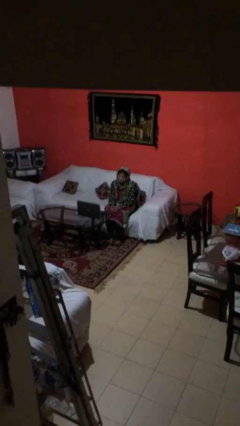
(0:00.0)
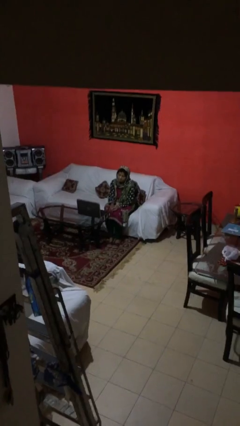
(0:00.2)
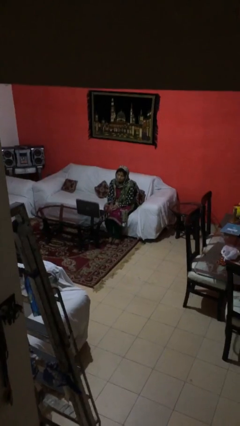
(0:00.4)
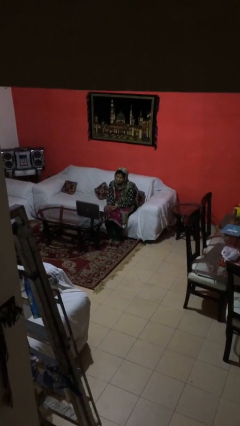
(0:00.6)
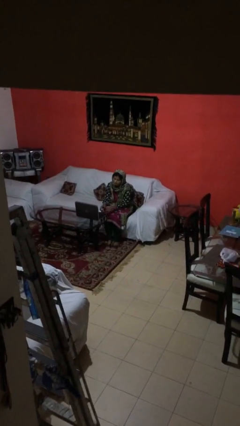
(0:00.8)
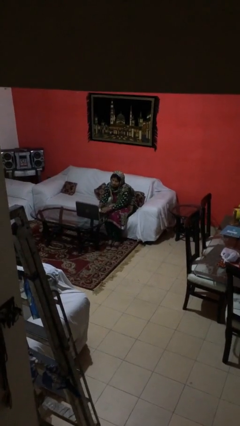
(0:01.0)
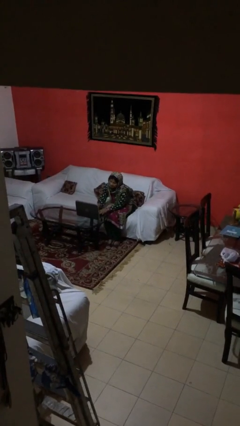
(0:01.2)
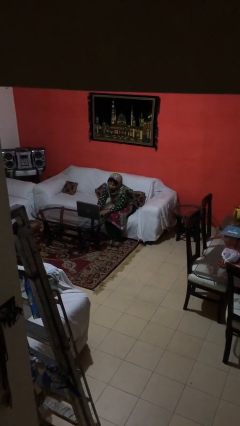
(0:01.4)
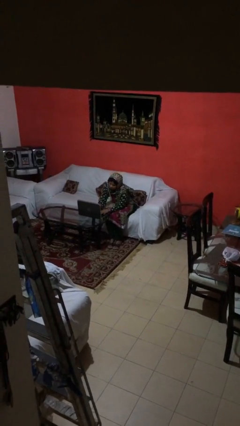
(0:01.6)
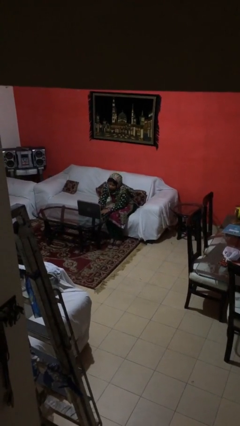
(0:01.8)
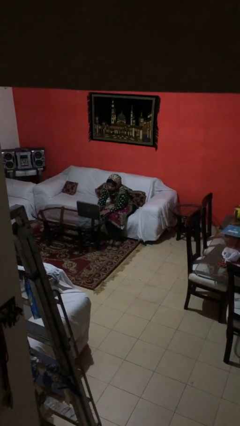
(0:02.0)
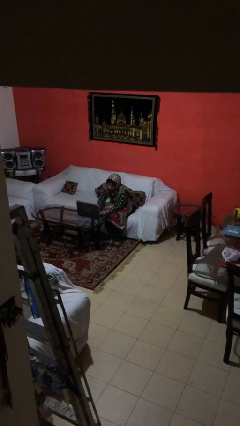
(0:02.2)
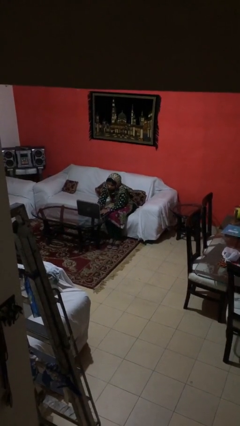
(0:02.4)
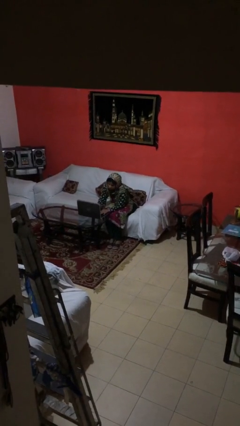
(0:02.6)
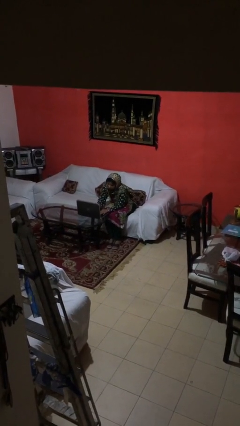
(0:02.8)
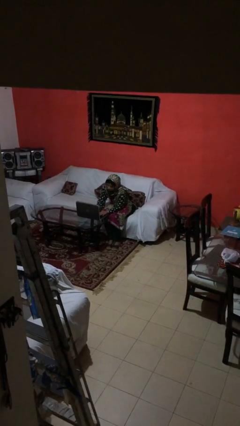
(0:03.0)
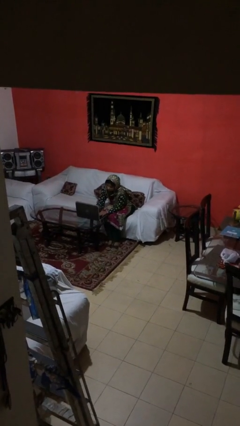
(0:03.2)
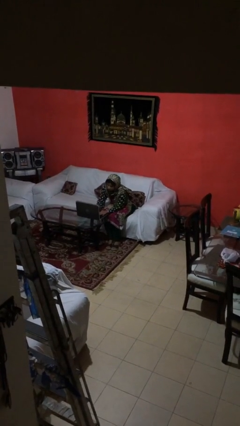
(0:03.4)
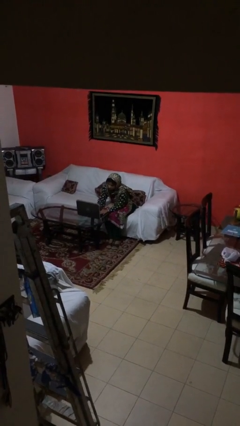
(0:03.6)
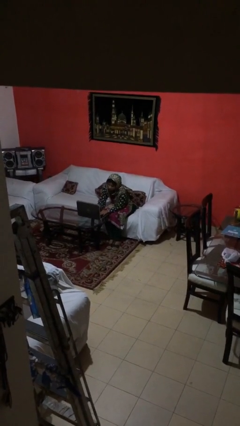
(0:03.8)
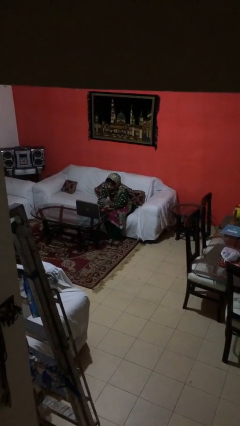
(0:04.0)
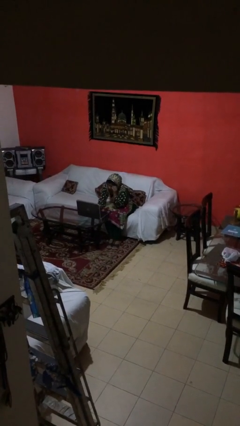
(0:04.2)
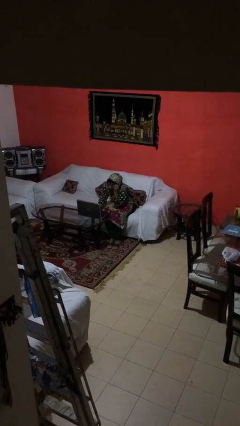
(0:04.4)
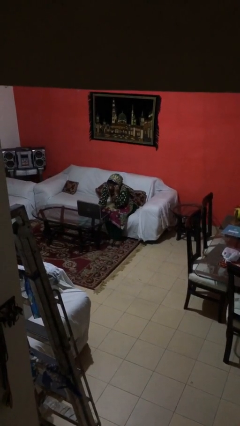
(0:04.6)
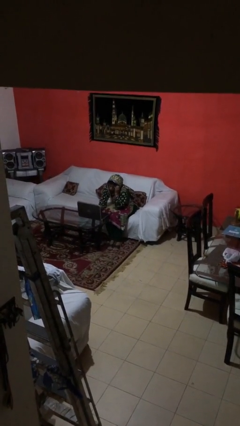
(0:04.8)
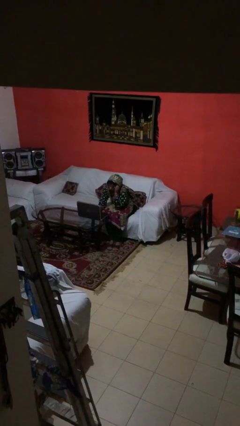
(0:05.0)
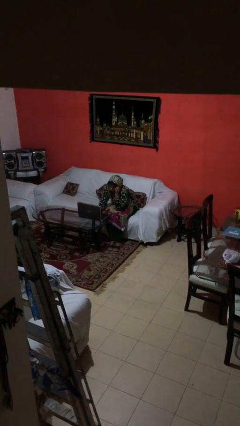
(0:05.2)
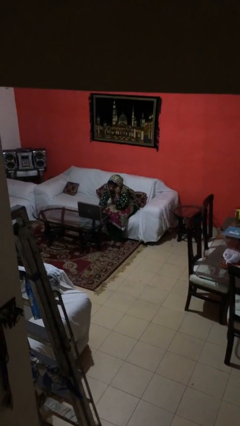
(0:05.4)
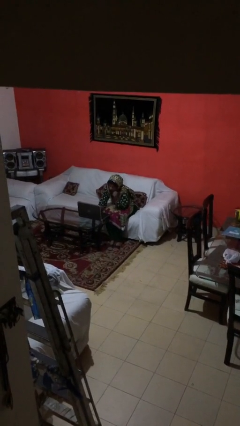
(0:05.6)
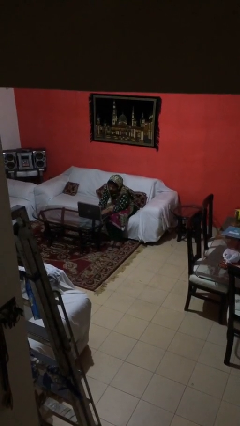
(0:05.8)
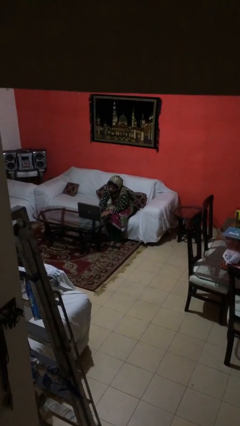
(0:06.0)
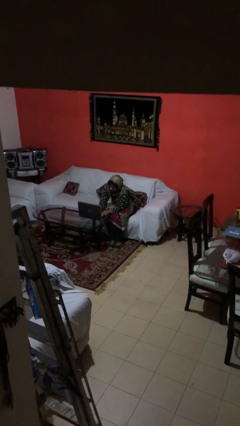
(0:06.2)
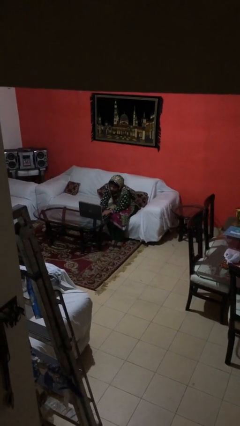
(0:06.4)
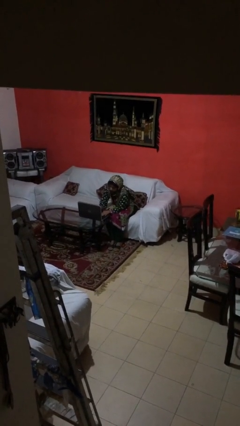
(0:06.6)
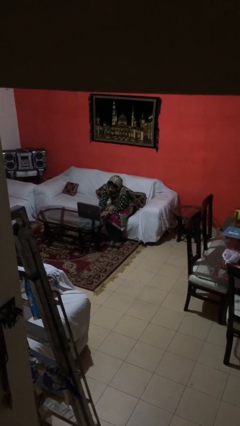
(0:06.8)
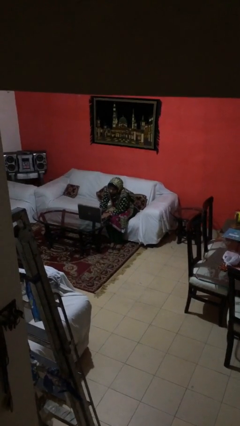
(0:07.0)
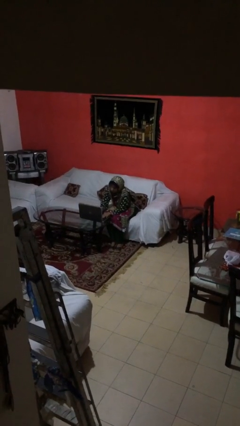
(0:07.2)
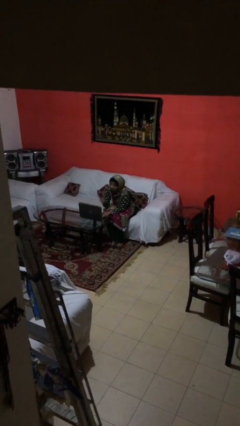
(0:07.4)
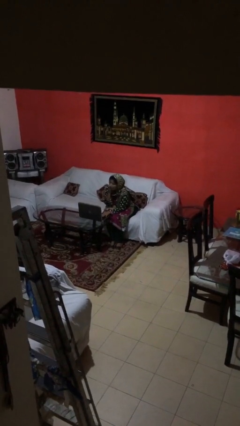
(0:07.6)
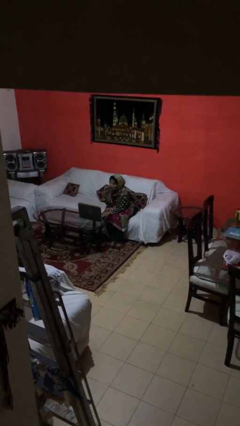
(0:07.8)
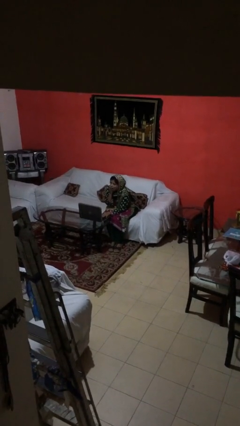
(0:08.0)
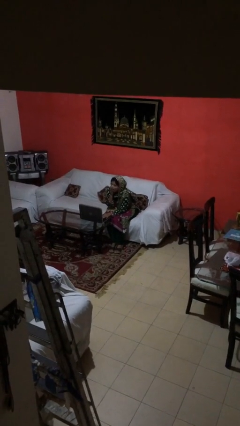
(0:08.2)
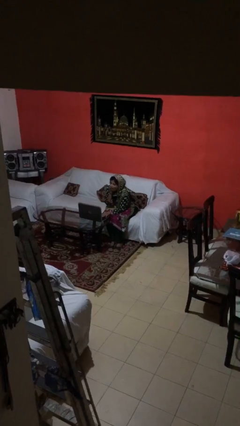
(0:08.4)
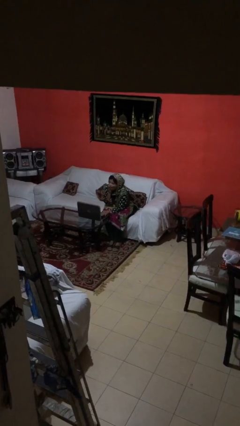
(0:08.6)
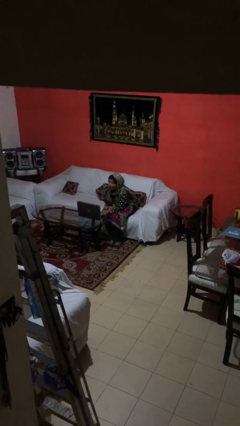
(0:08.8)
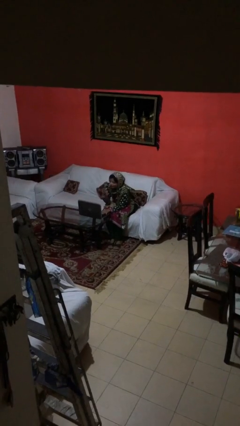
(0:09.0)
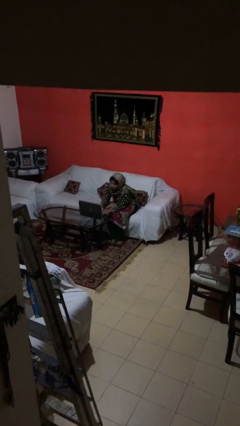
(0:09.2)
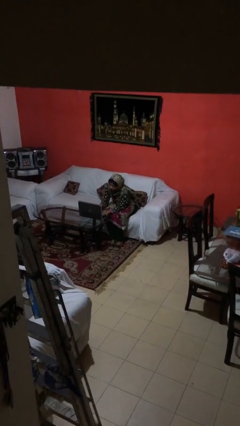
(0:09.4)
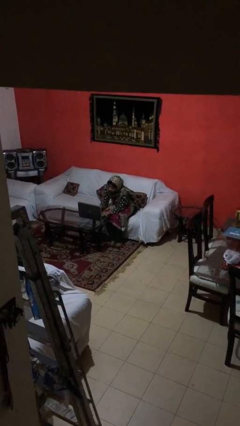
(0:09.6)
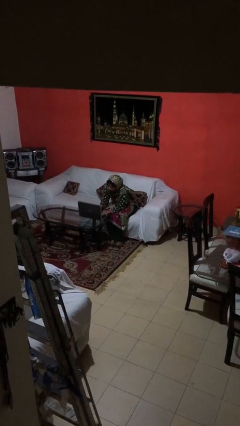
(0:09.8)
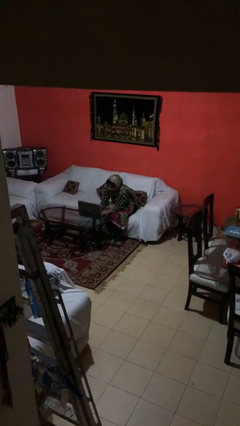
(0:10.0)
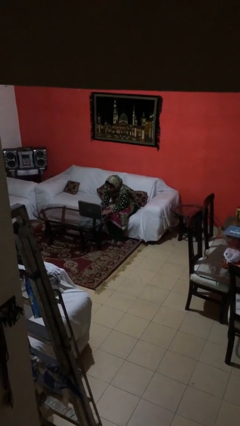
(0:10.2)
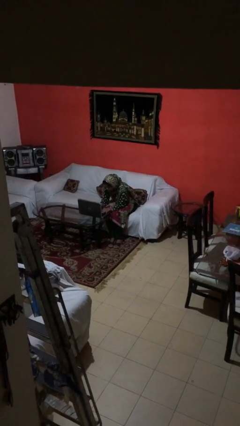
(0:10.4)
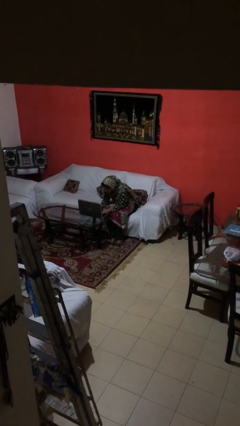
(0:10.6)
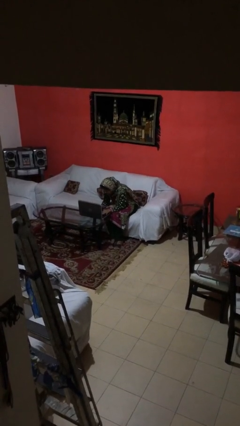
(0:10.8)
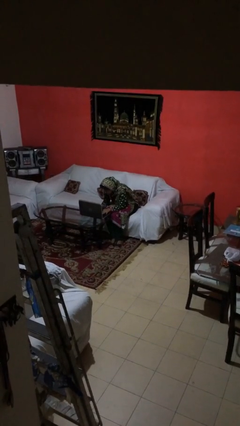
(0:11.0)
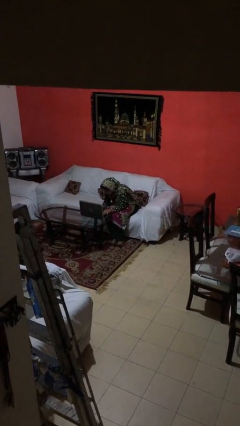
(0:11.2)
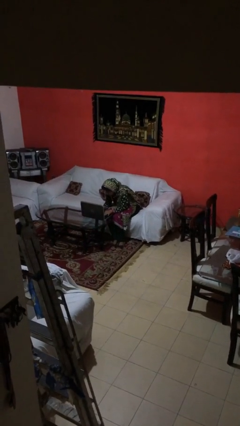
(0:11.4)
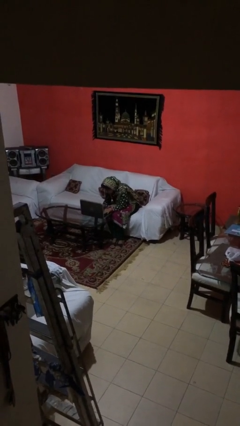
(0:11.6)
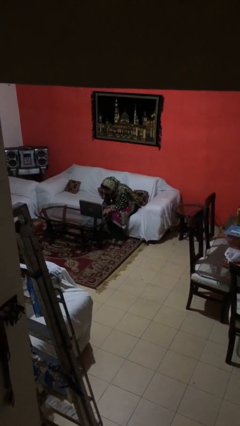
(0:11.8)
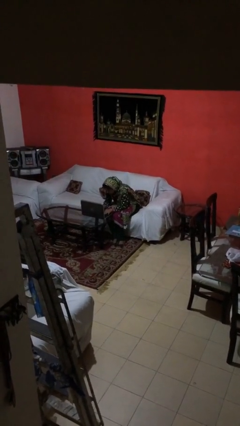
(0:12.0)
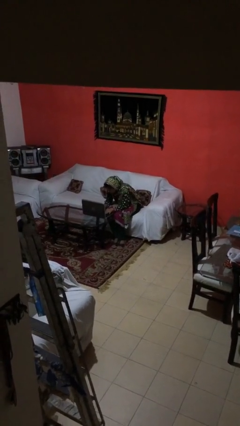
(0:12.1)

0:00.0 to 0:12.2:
person interacts with laptop

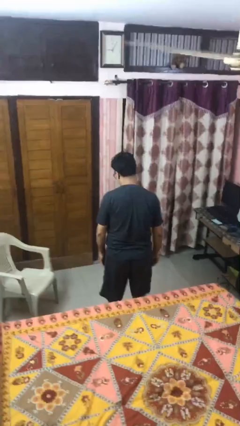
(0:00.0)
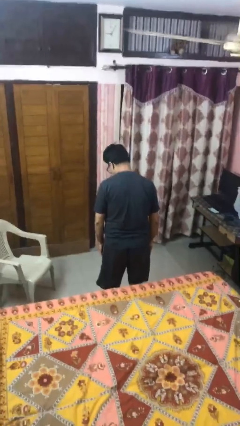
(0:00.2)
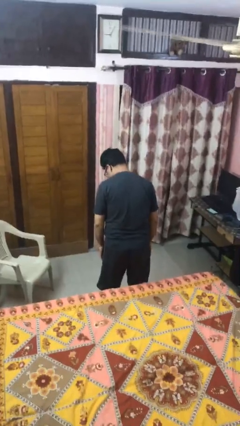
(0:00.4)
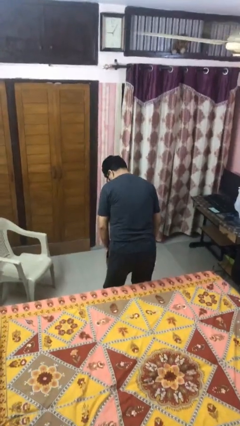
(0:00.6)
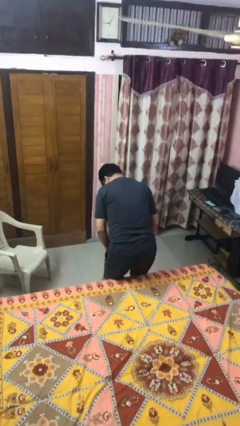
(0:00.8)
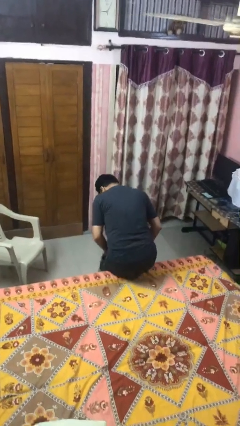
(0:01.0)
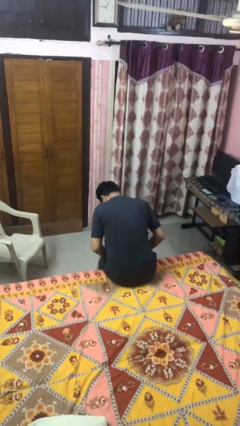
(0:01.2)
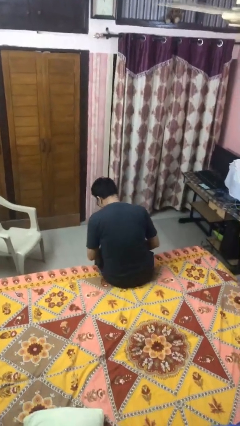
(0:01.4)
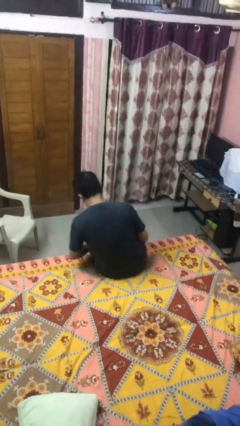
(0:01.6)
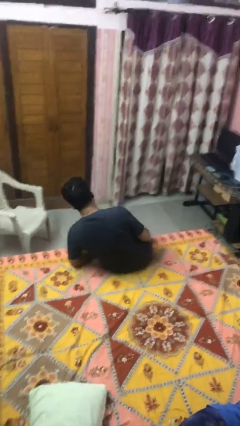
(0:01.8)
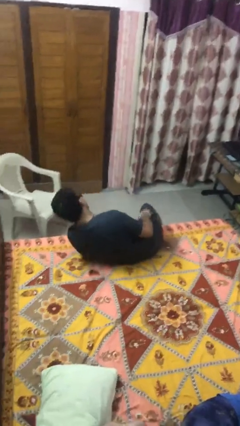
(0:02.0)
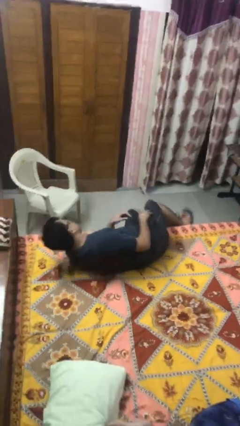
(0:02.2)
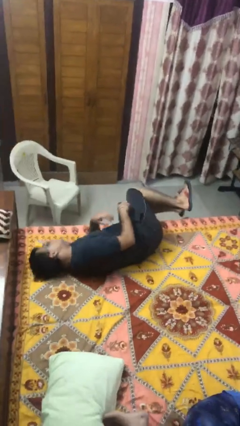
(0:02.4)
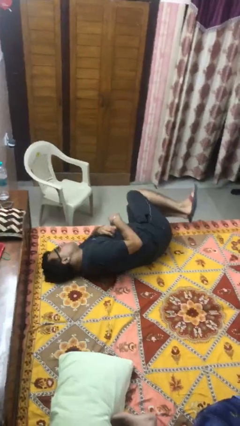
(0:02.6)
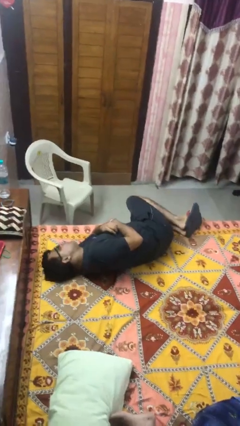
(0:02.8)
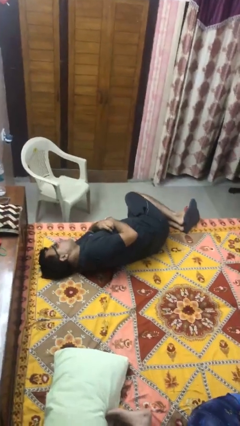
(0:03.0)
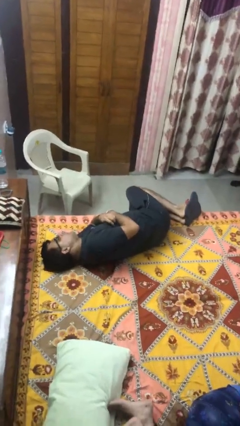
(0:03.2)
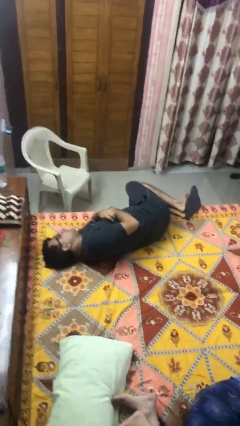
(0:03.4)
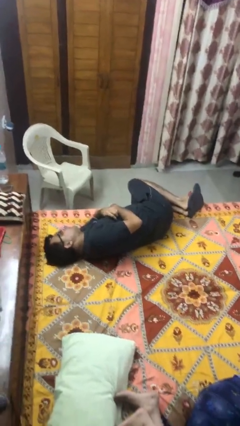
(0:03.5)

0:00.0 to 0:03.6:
person lies down on bed

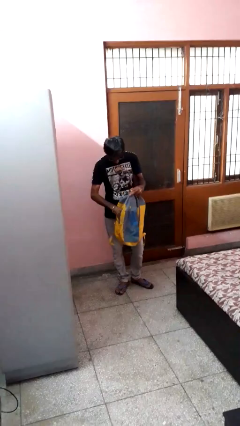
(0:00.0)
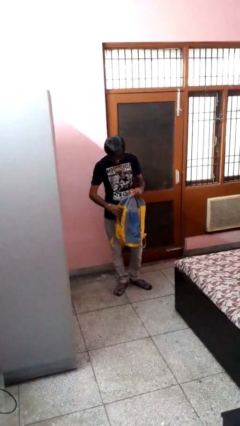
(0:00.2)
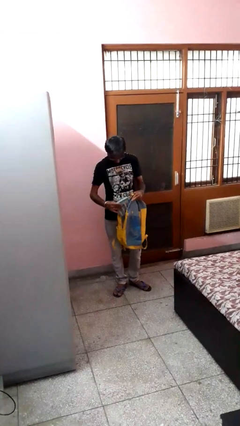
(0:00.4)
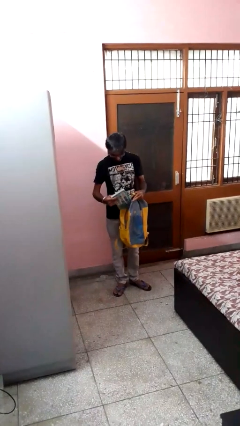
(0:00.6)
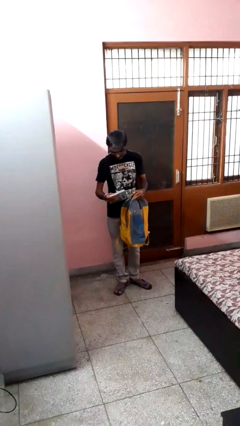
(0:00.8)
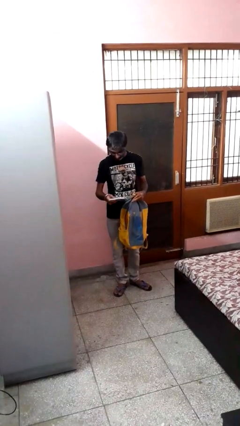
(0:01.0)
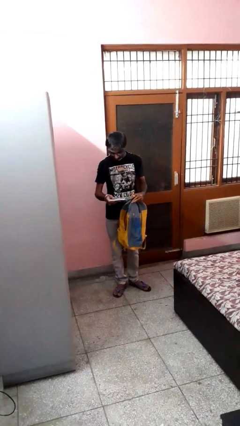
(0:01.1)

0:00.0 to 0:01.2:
person takes object from backpack

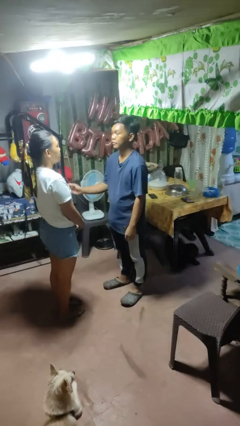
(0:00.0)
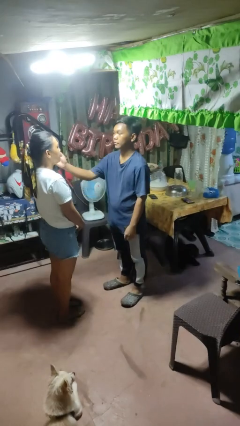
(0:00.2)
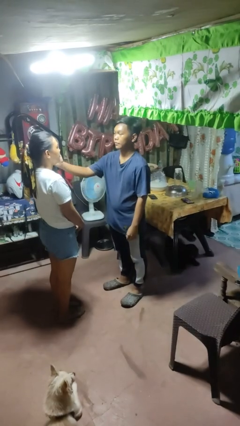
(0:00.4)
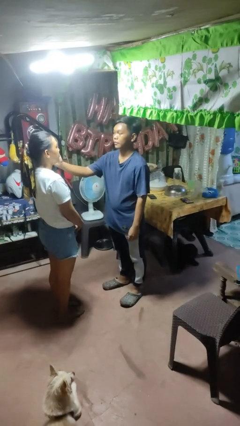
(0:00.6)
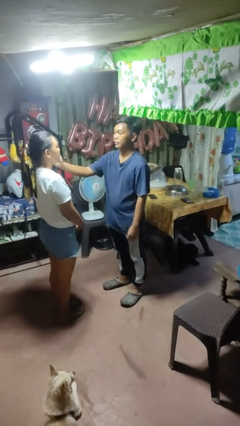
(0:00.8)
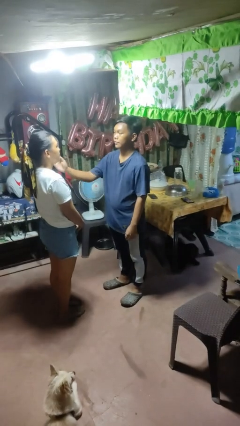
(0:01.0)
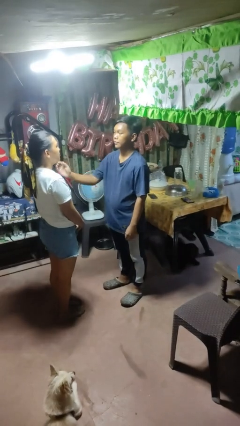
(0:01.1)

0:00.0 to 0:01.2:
person touches face of person
